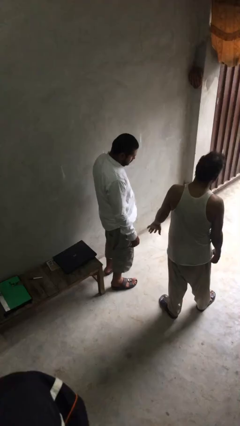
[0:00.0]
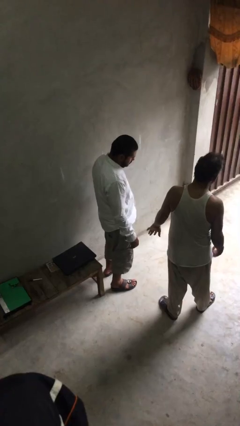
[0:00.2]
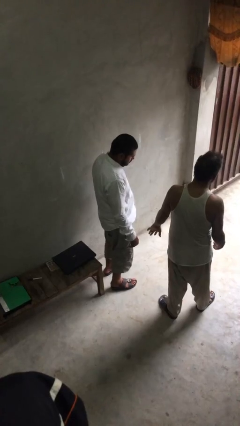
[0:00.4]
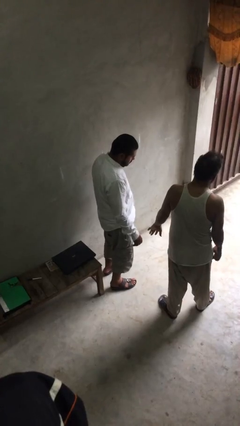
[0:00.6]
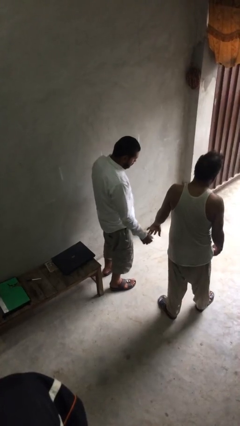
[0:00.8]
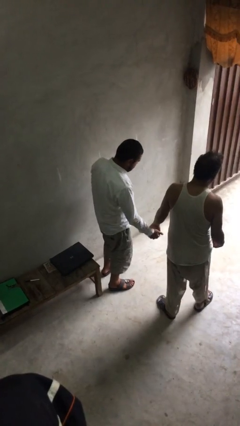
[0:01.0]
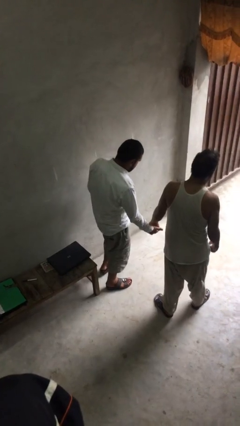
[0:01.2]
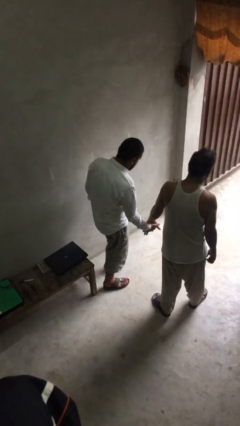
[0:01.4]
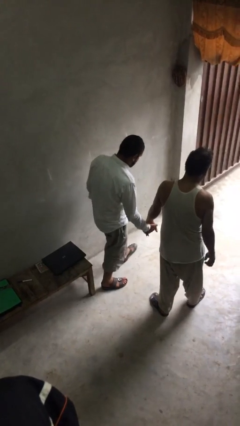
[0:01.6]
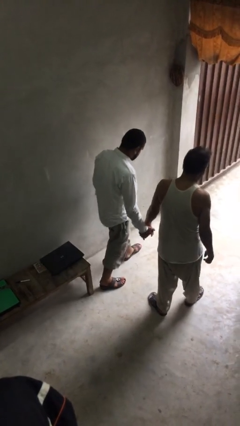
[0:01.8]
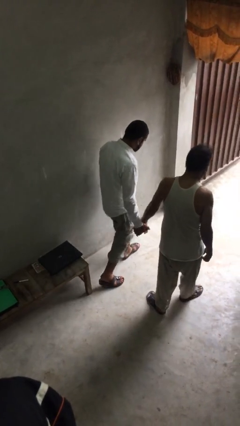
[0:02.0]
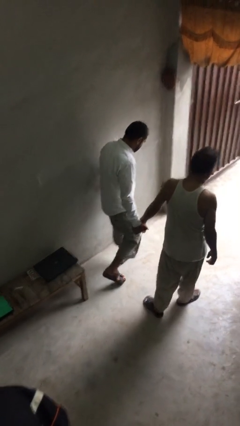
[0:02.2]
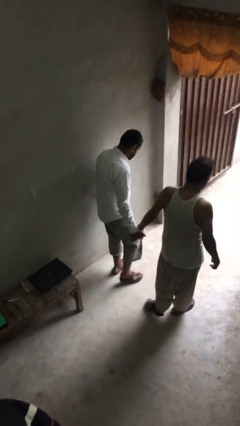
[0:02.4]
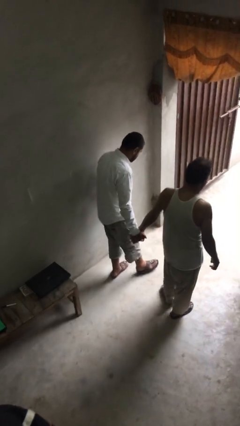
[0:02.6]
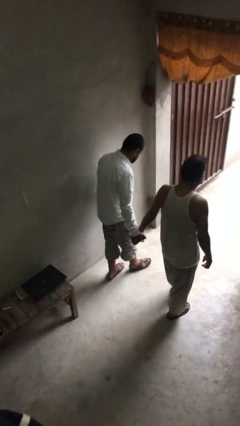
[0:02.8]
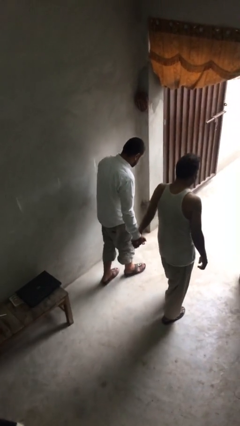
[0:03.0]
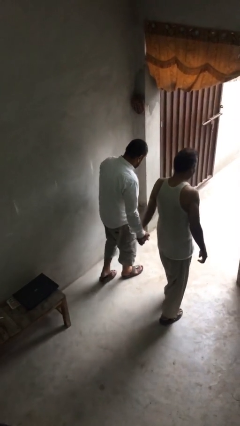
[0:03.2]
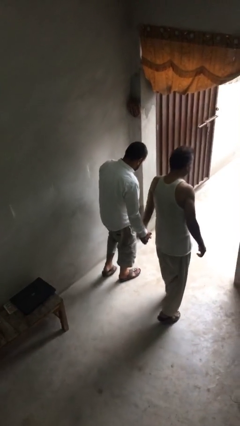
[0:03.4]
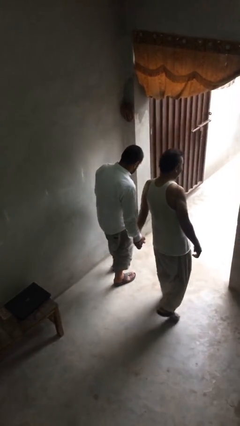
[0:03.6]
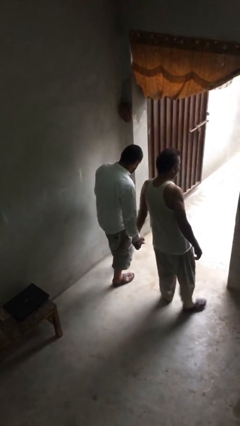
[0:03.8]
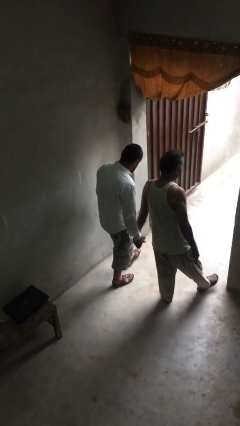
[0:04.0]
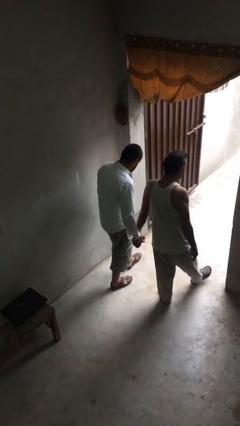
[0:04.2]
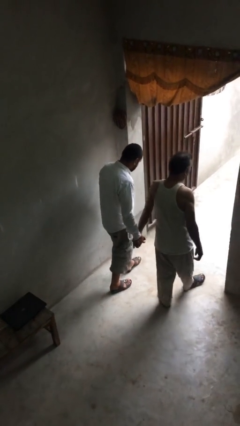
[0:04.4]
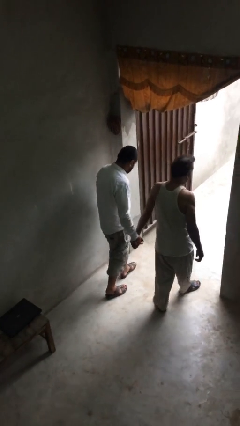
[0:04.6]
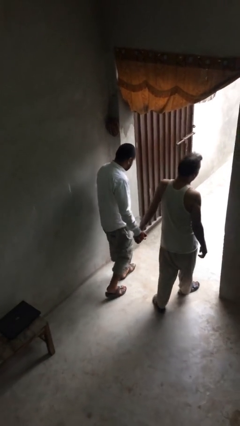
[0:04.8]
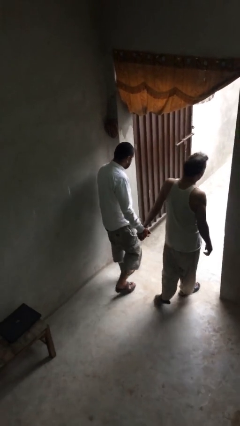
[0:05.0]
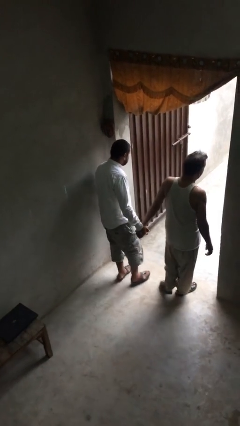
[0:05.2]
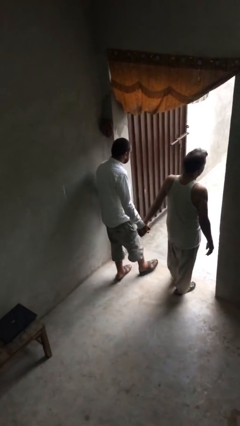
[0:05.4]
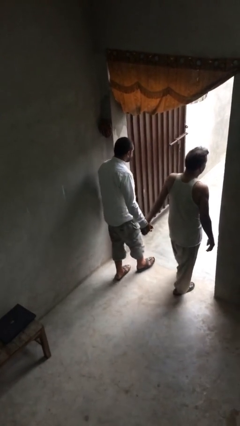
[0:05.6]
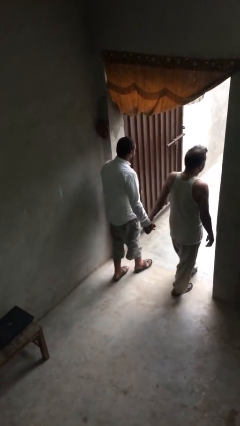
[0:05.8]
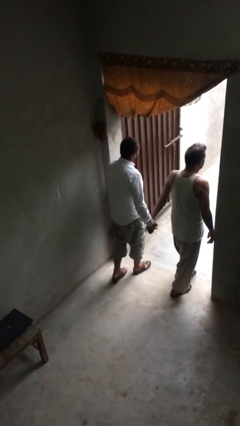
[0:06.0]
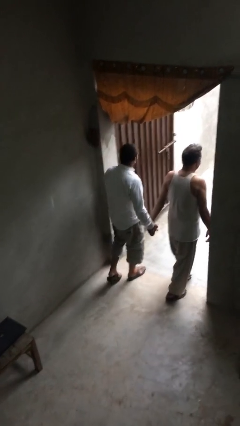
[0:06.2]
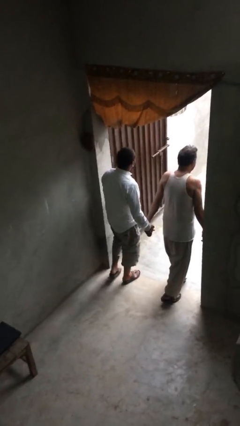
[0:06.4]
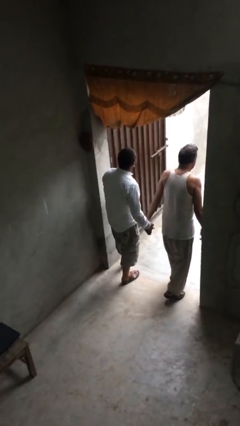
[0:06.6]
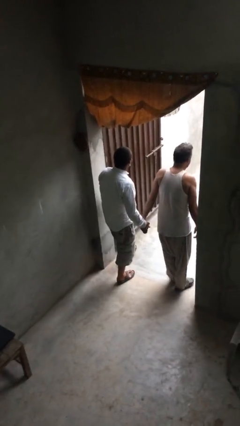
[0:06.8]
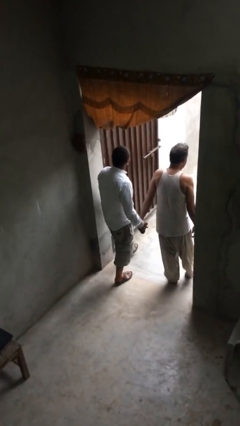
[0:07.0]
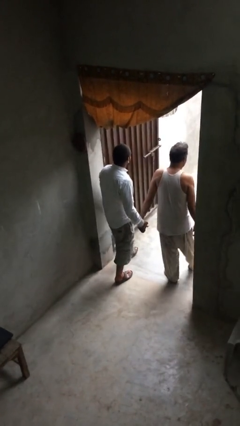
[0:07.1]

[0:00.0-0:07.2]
person holds hand

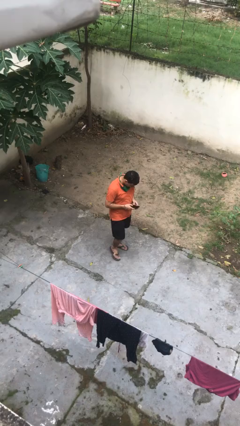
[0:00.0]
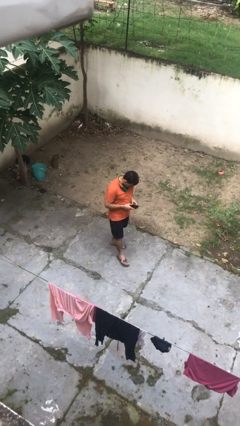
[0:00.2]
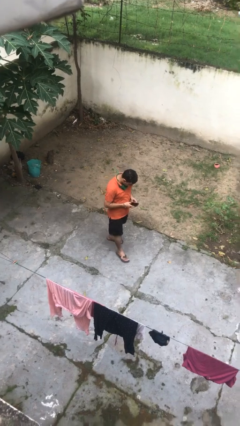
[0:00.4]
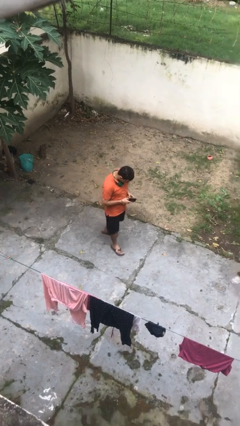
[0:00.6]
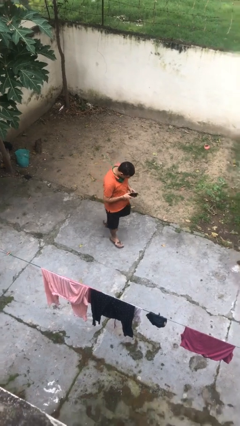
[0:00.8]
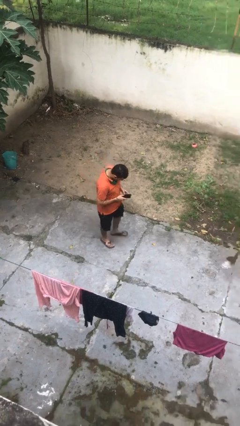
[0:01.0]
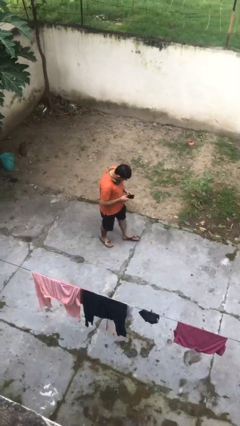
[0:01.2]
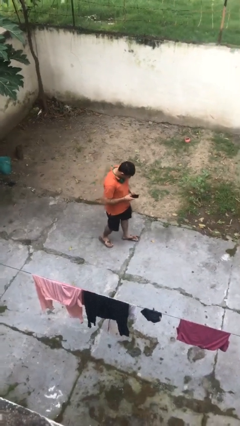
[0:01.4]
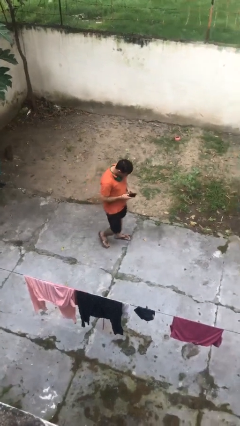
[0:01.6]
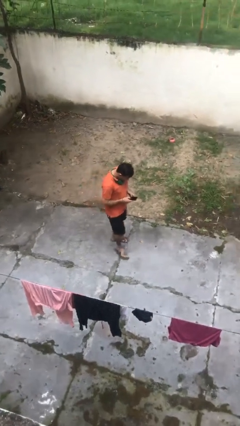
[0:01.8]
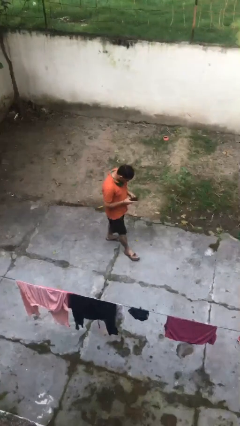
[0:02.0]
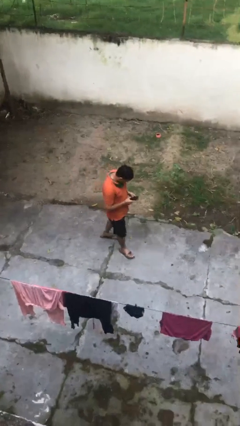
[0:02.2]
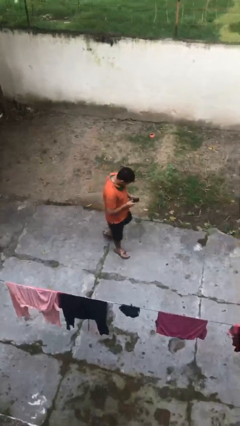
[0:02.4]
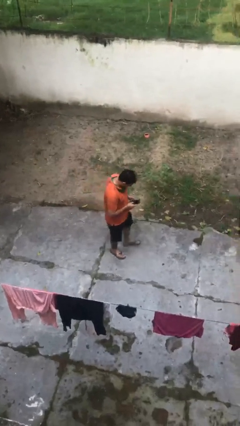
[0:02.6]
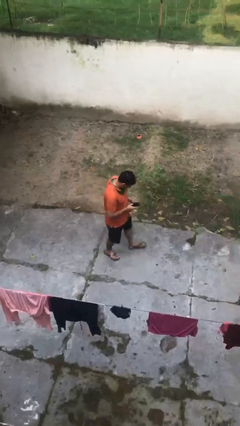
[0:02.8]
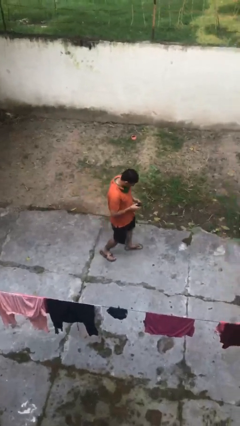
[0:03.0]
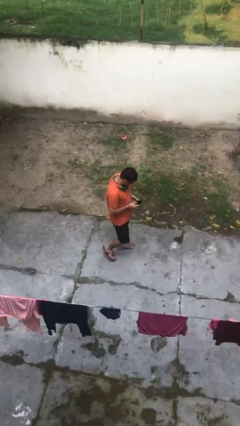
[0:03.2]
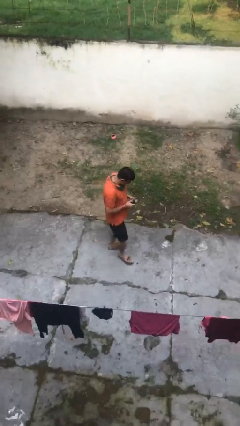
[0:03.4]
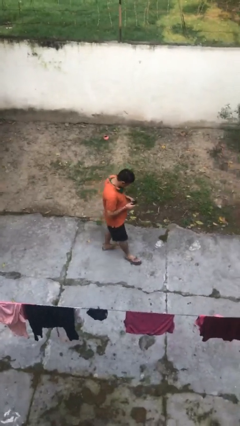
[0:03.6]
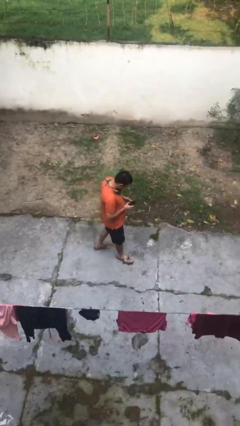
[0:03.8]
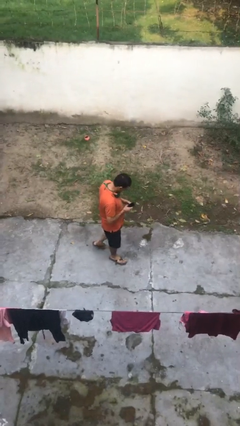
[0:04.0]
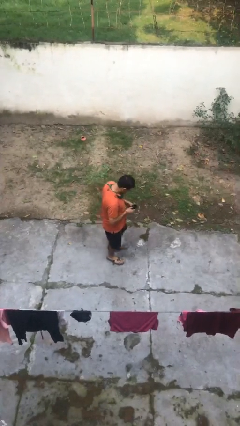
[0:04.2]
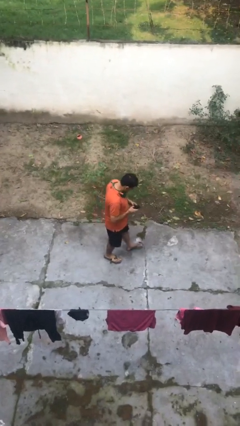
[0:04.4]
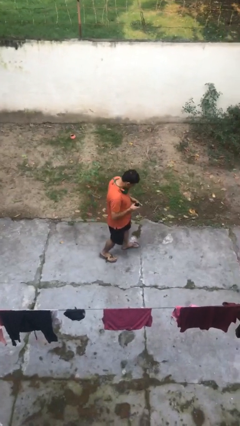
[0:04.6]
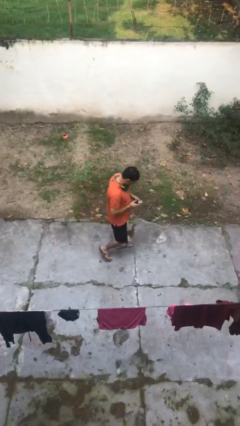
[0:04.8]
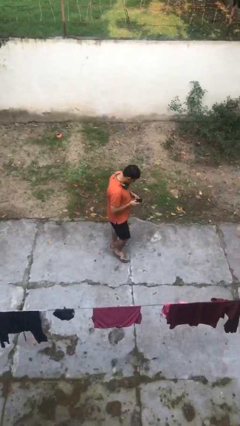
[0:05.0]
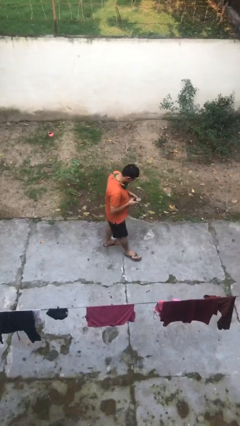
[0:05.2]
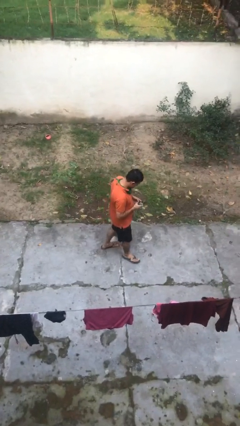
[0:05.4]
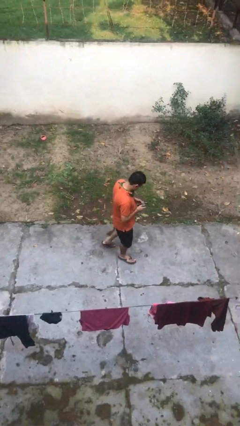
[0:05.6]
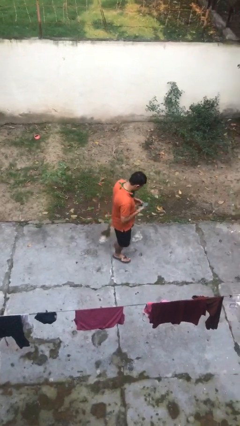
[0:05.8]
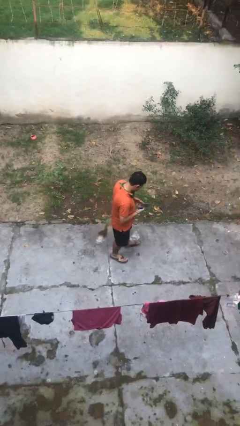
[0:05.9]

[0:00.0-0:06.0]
person texts on phone

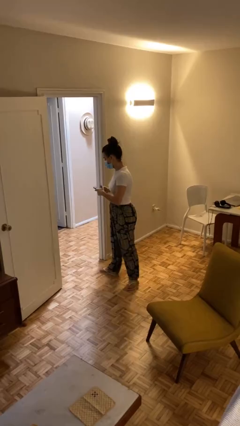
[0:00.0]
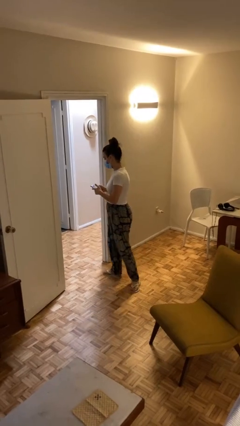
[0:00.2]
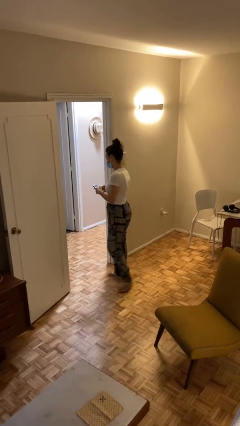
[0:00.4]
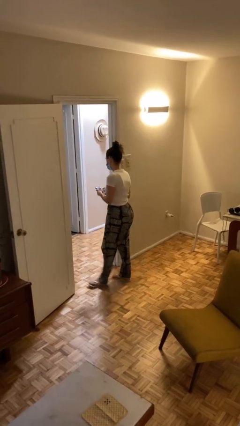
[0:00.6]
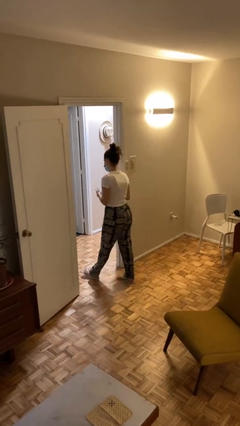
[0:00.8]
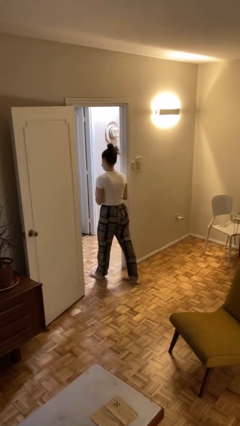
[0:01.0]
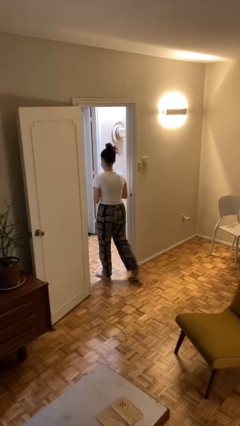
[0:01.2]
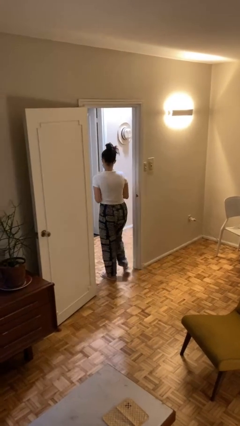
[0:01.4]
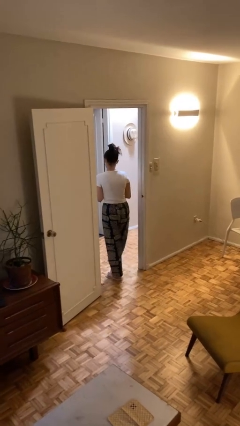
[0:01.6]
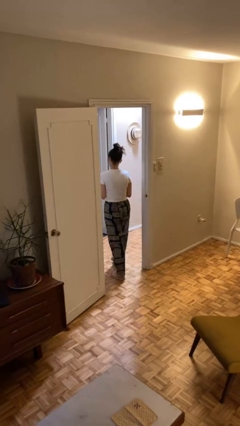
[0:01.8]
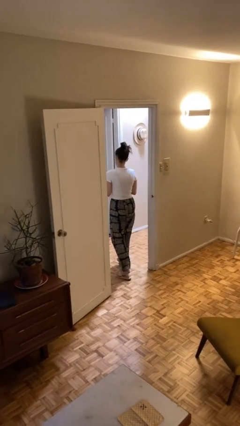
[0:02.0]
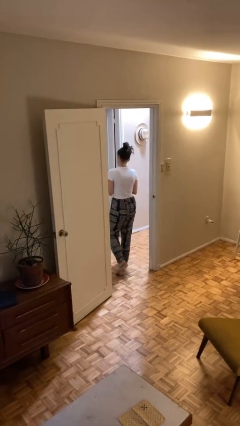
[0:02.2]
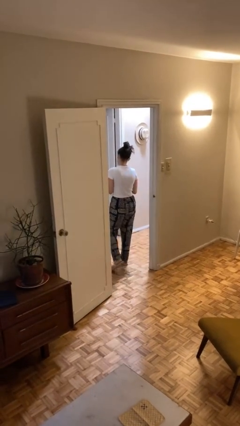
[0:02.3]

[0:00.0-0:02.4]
person exits scene through structure

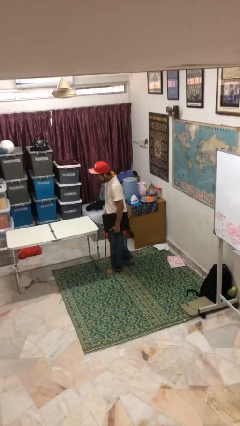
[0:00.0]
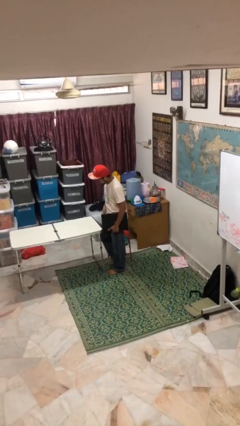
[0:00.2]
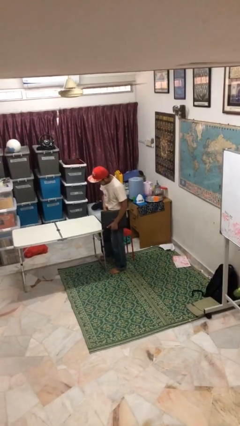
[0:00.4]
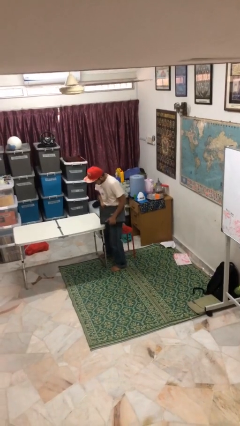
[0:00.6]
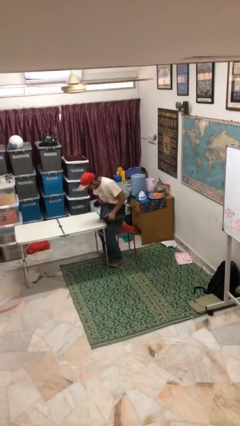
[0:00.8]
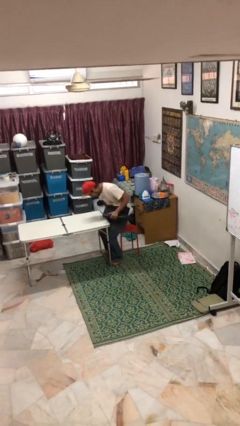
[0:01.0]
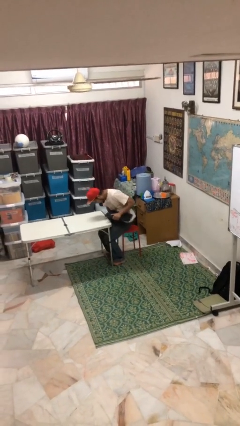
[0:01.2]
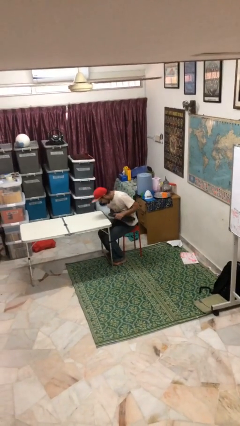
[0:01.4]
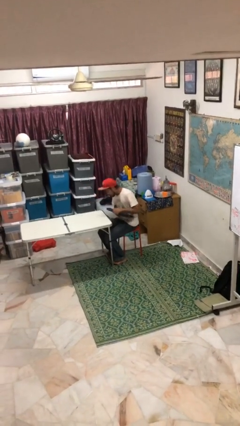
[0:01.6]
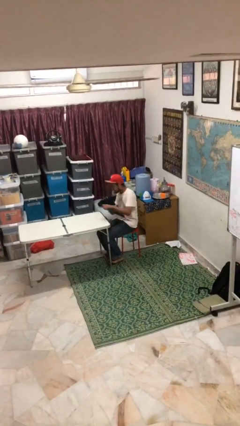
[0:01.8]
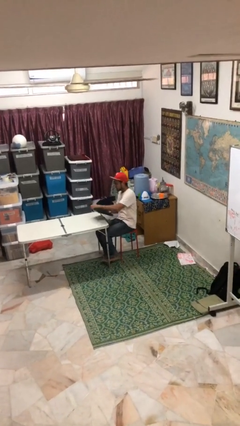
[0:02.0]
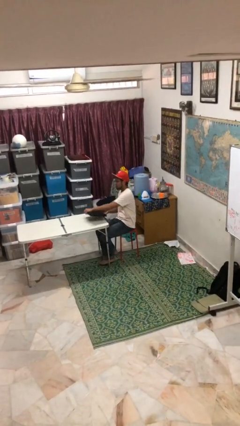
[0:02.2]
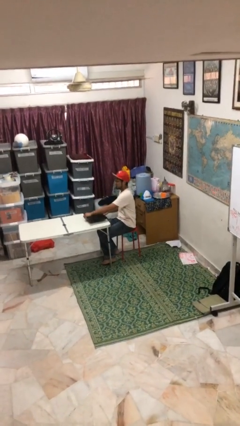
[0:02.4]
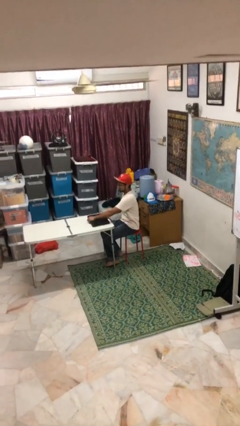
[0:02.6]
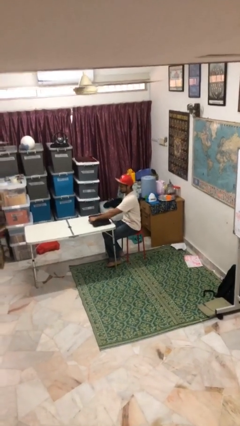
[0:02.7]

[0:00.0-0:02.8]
person sits down
